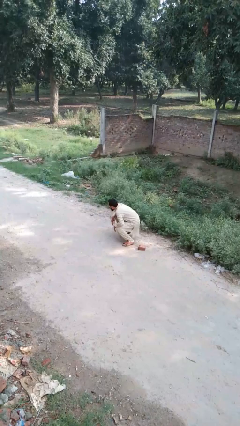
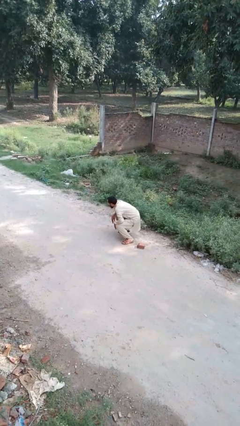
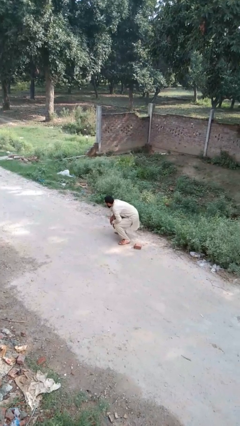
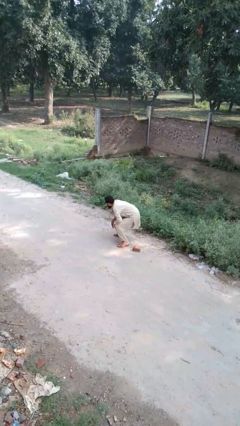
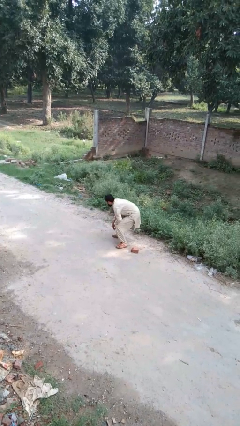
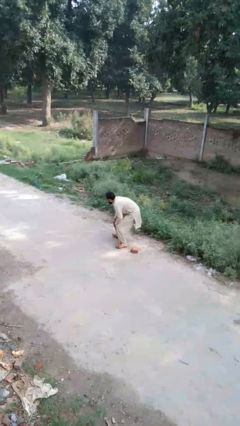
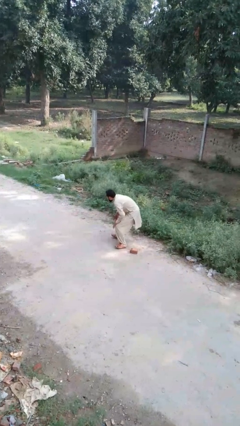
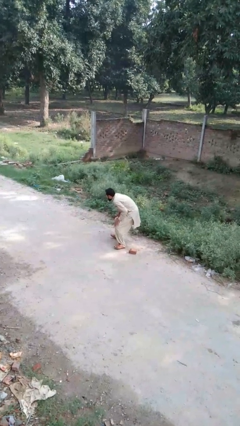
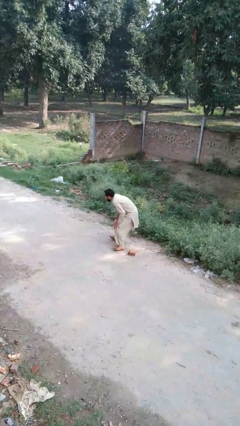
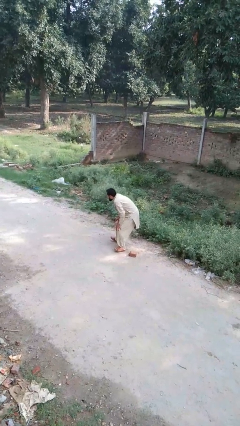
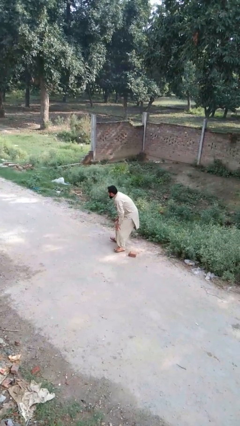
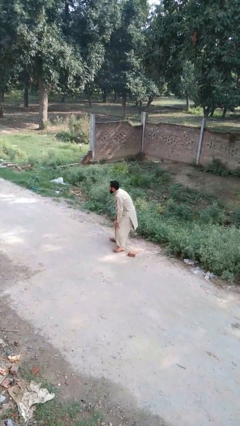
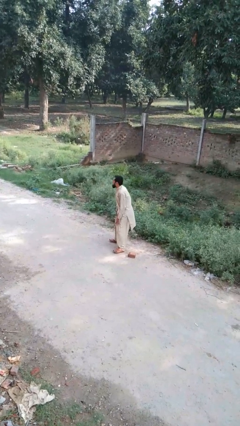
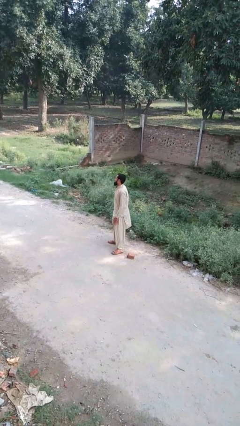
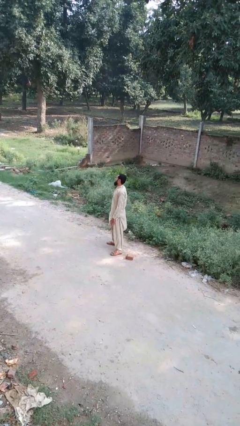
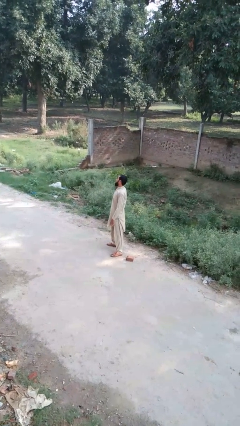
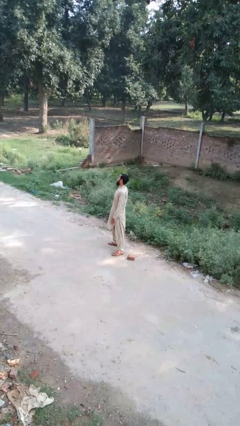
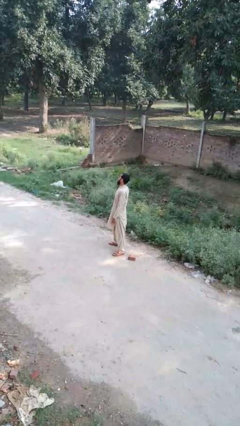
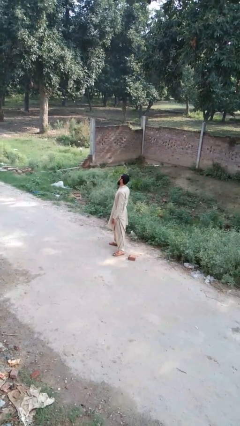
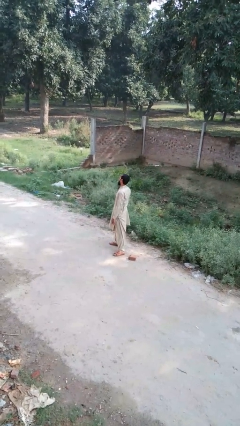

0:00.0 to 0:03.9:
person stands up from floor

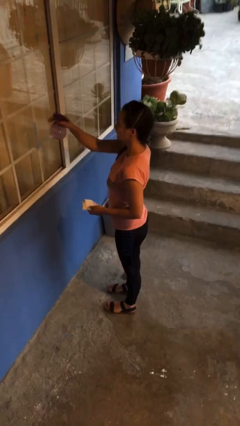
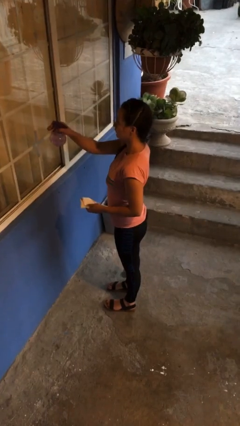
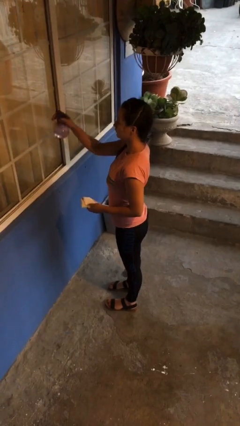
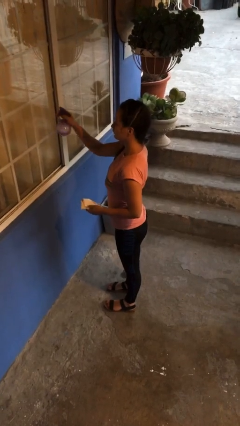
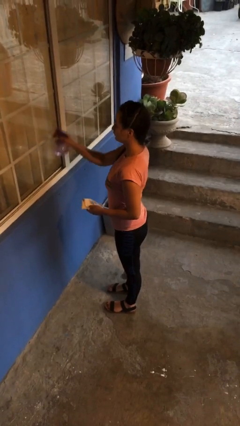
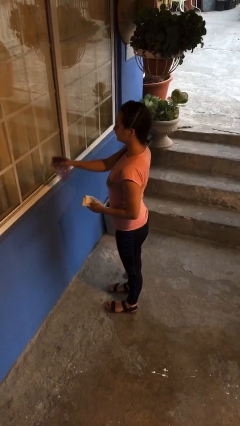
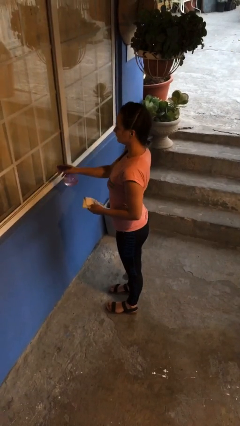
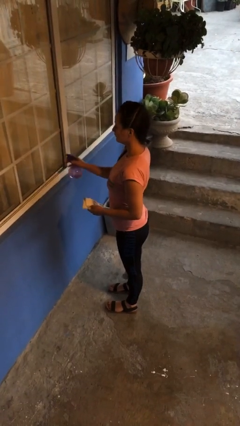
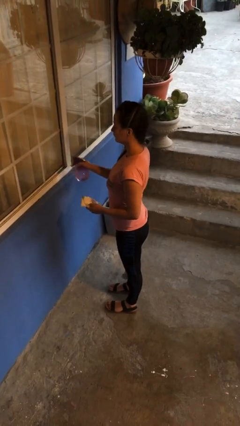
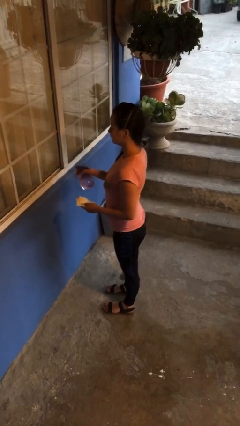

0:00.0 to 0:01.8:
person sprays from bottle

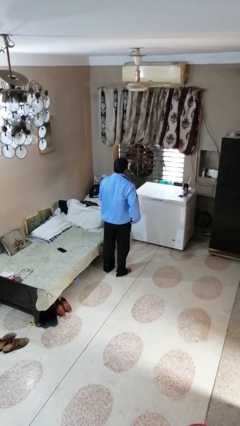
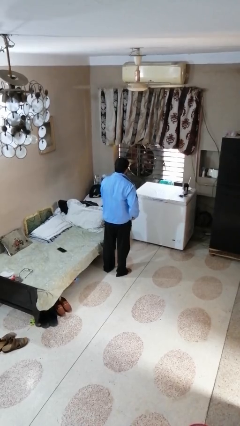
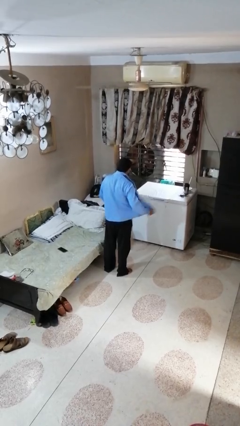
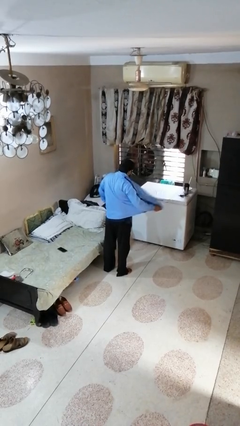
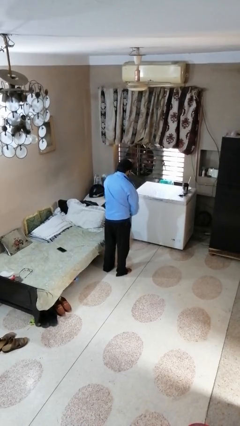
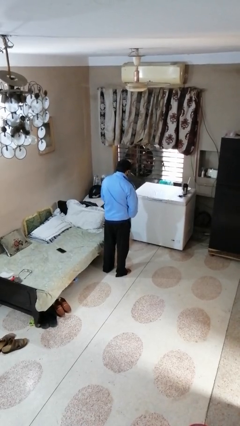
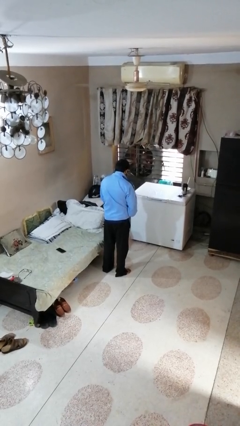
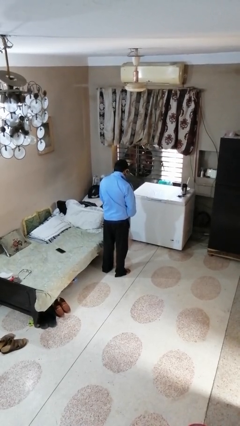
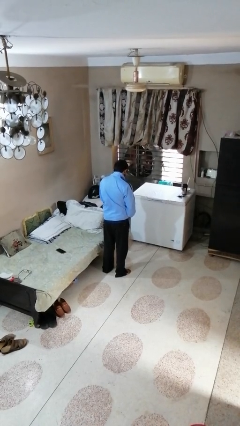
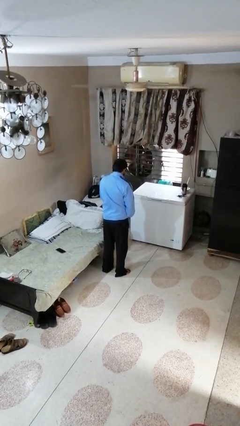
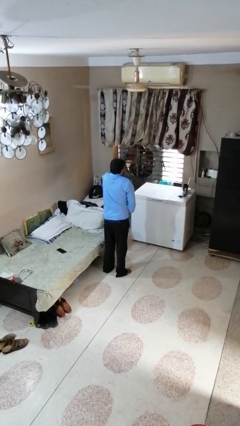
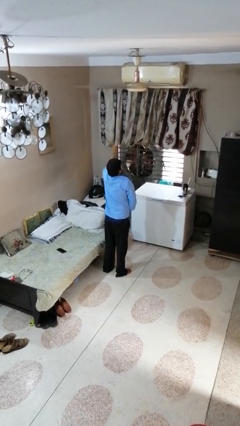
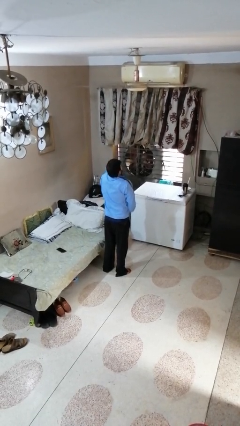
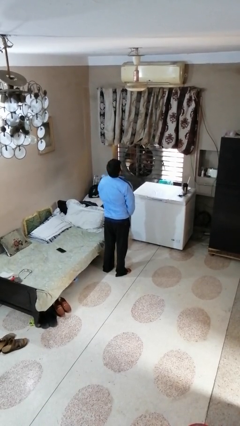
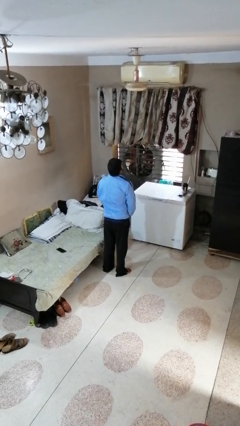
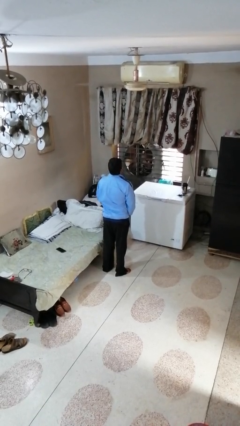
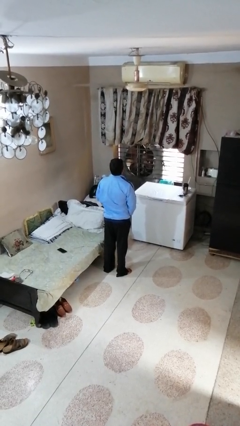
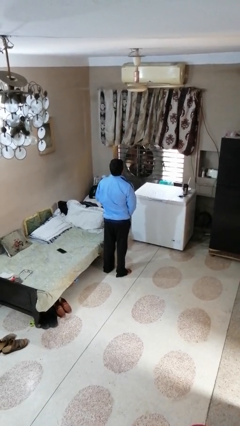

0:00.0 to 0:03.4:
person zips up jacket

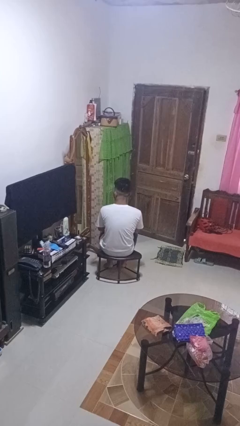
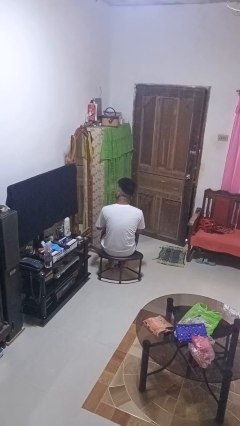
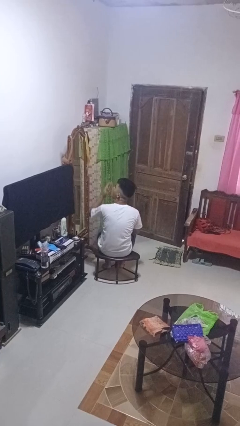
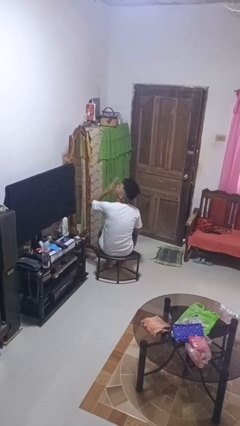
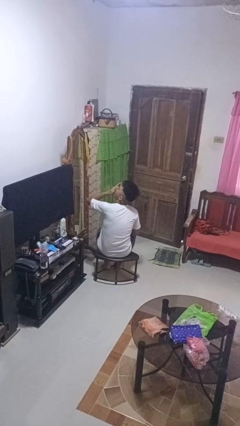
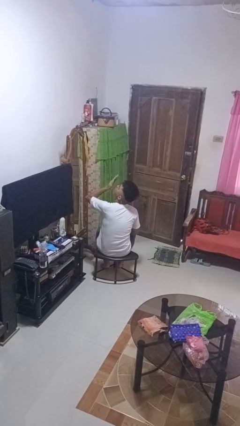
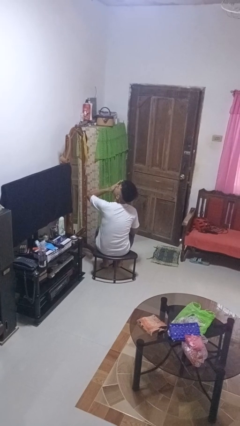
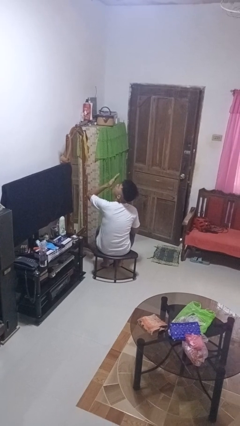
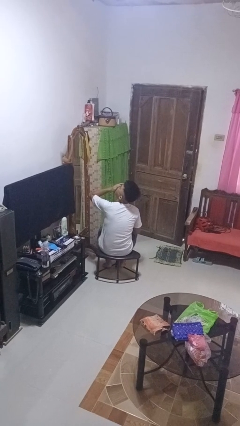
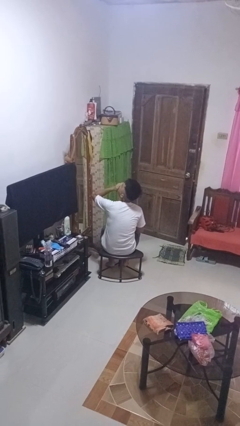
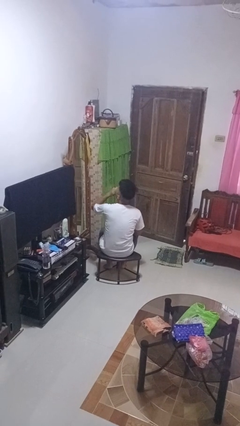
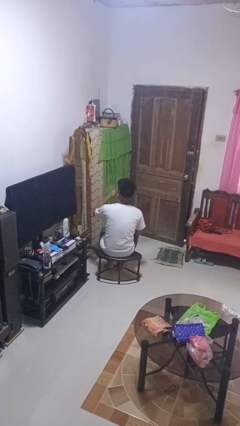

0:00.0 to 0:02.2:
person yawns

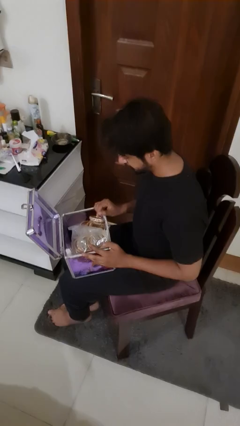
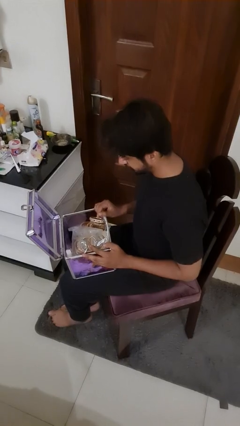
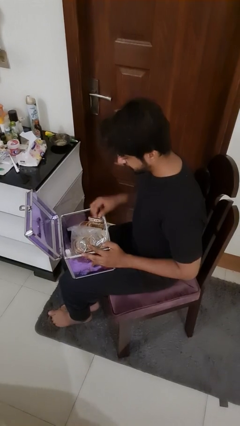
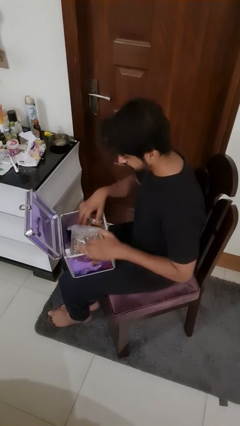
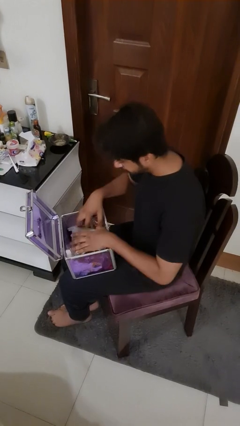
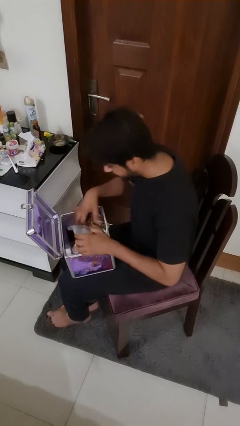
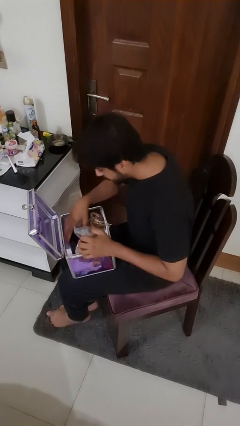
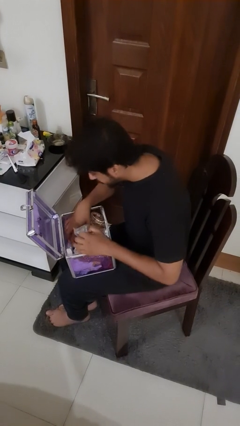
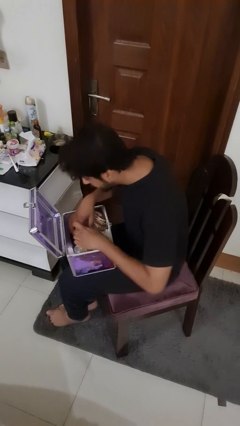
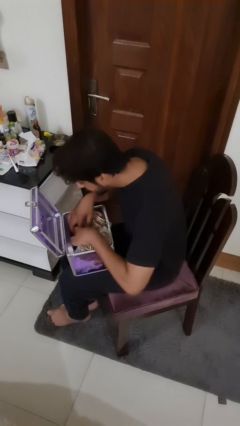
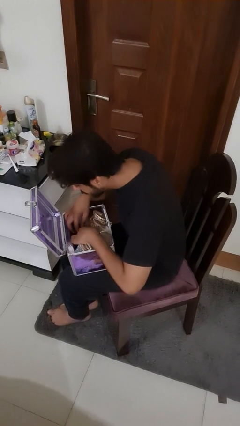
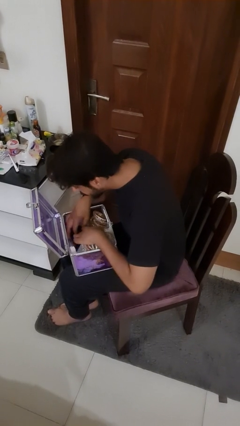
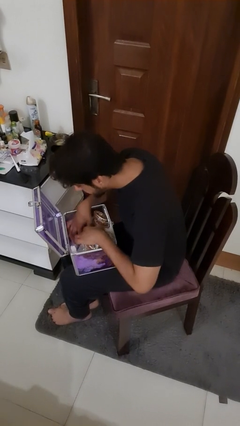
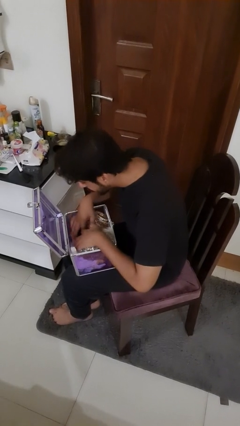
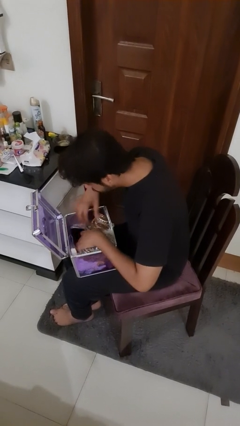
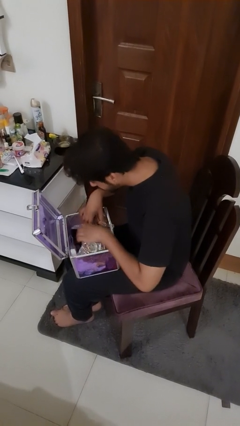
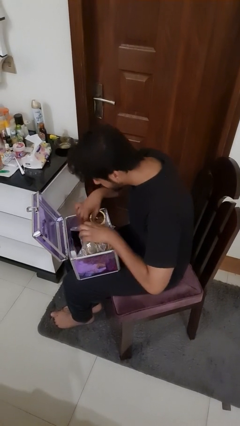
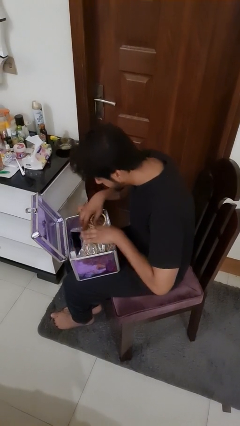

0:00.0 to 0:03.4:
person searches jewelry box

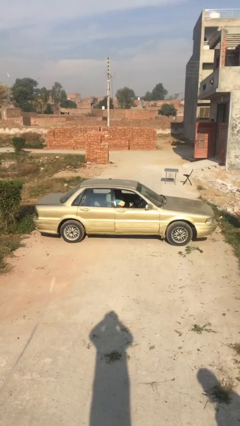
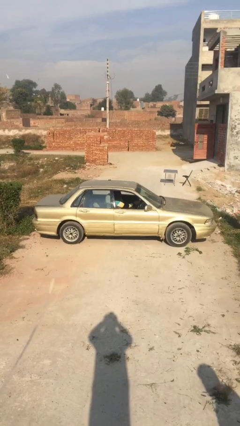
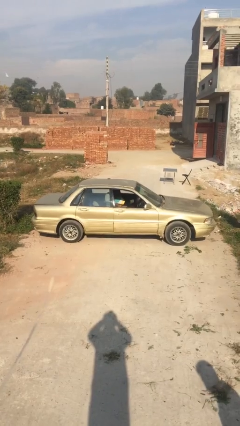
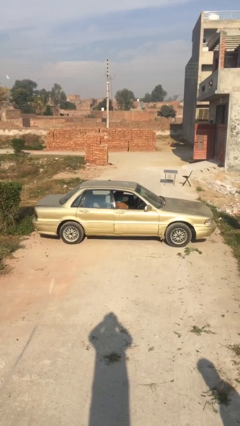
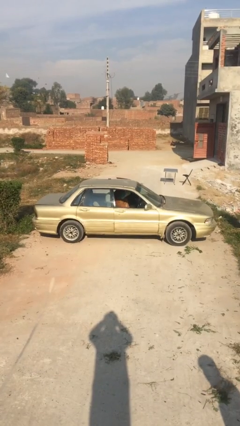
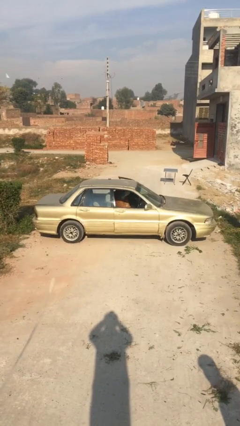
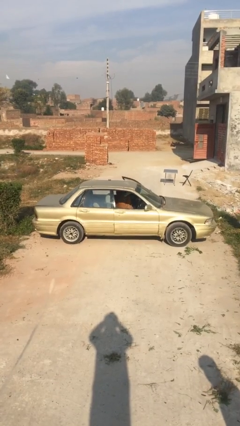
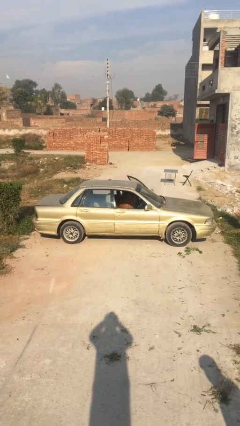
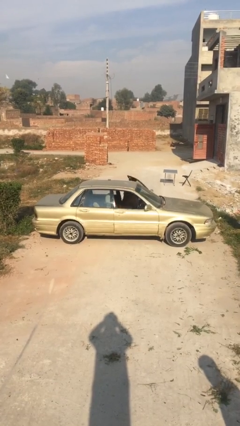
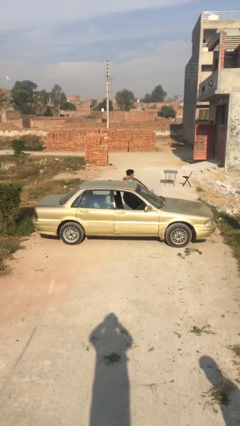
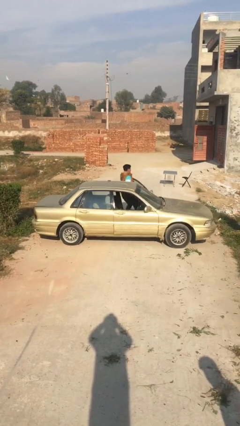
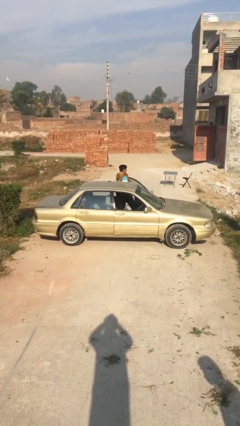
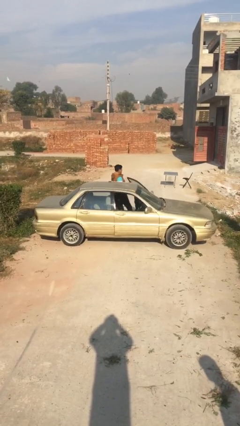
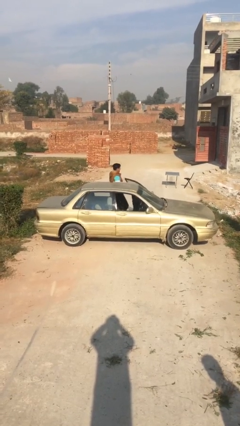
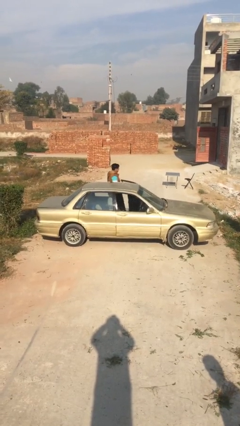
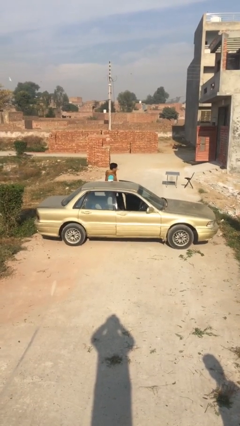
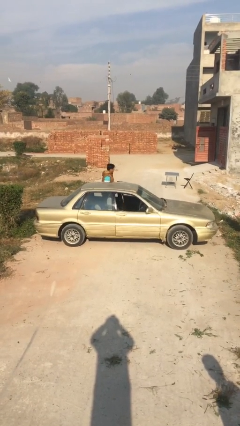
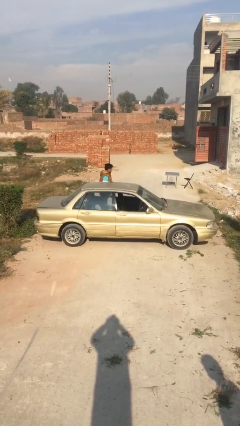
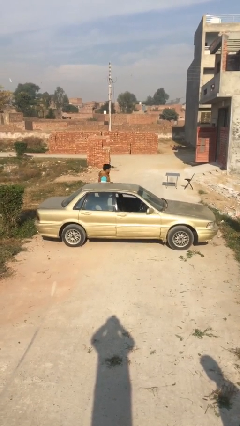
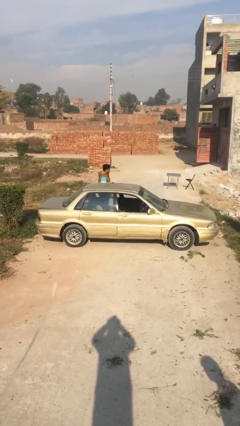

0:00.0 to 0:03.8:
car drops off person
